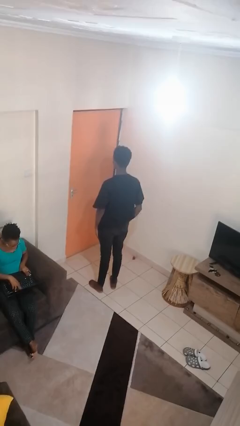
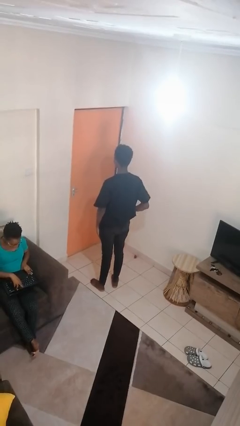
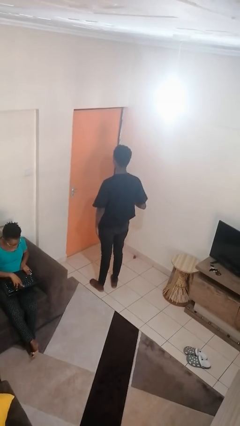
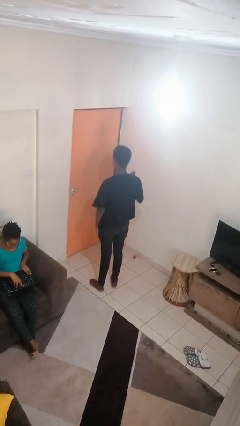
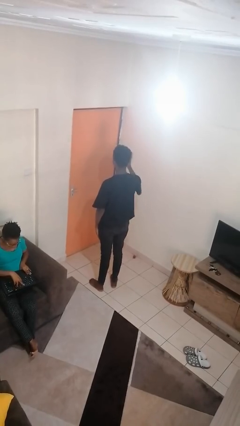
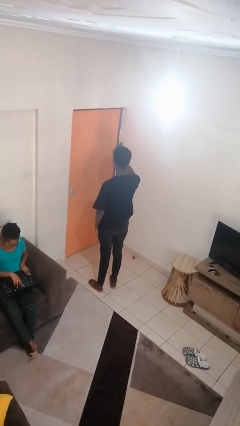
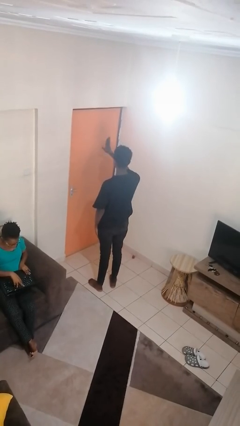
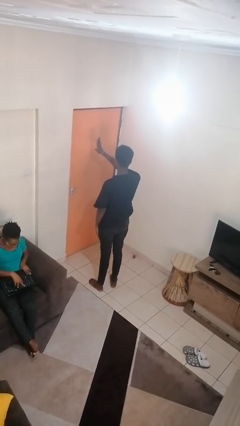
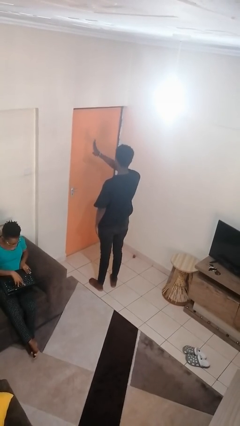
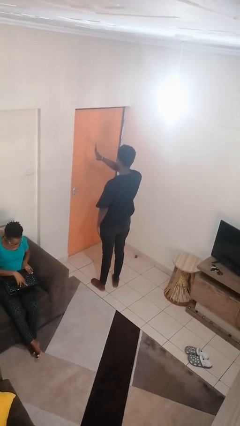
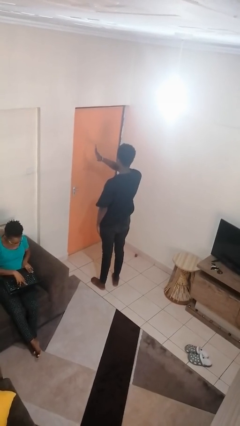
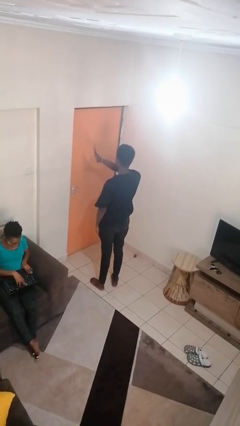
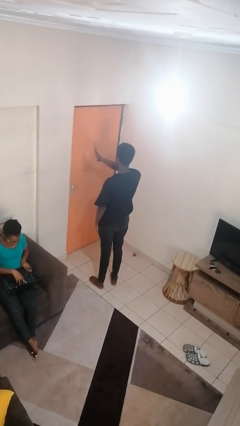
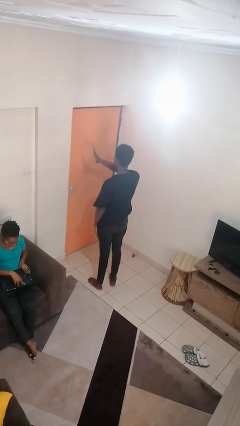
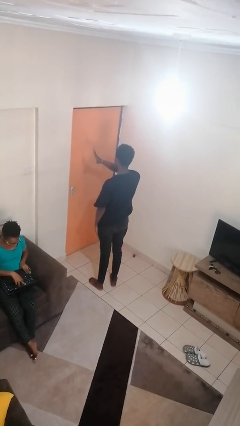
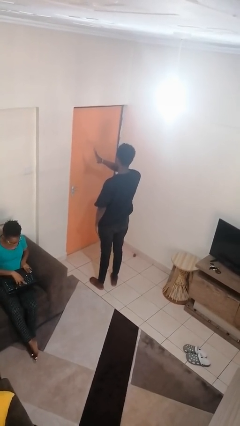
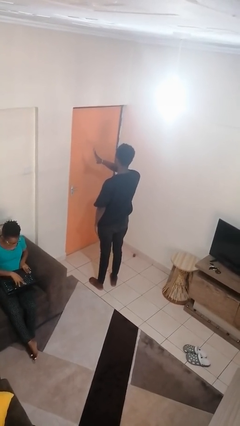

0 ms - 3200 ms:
person gestures swipe left

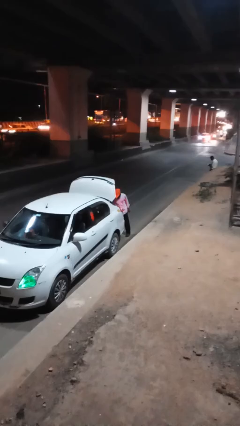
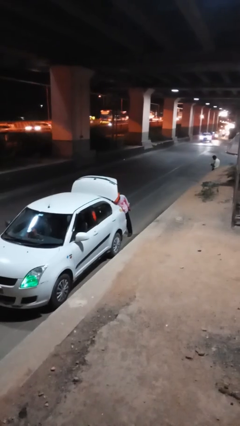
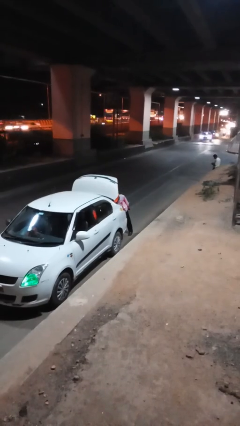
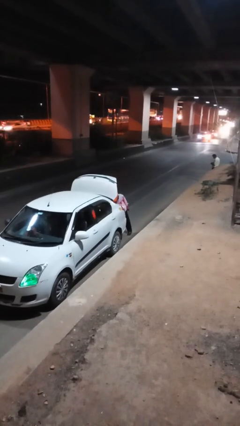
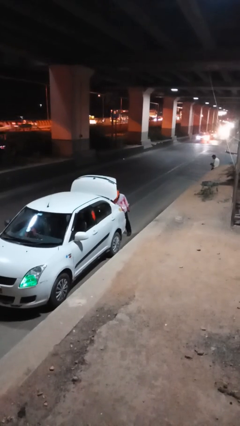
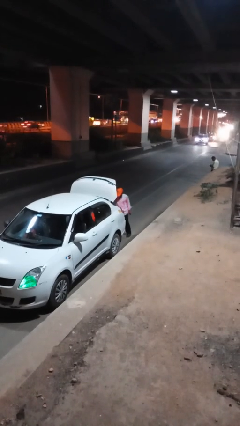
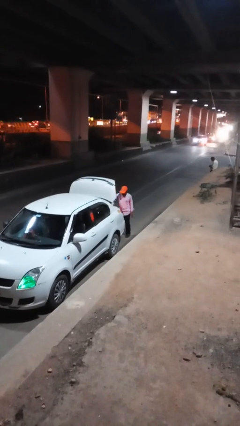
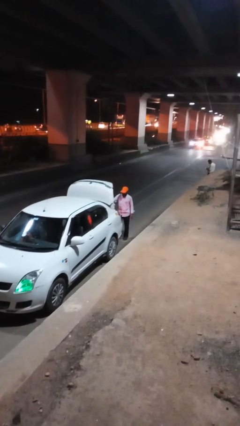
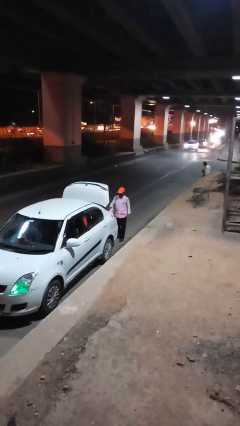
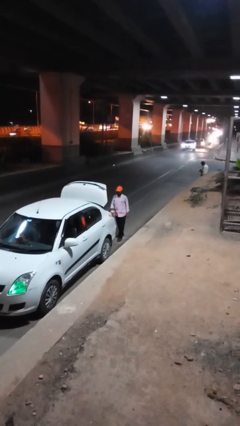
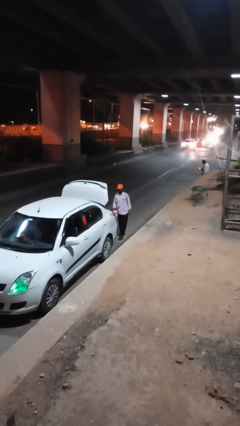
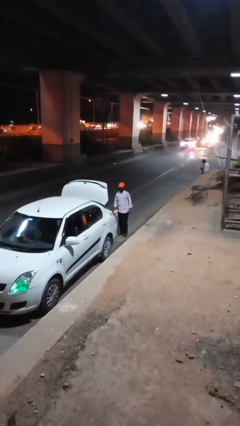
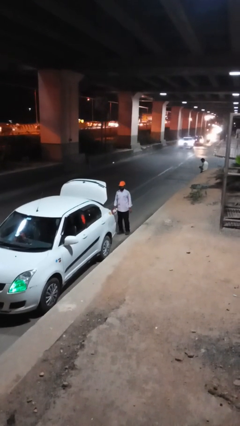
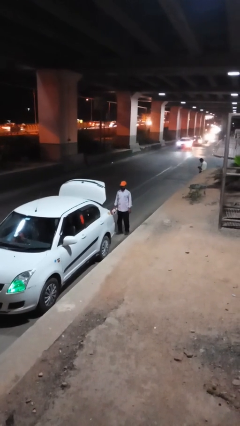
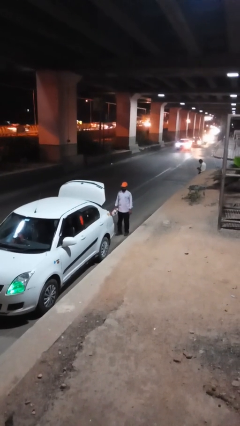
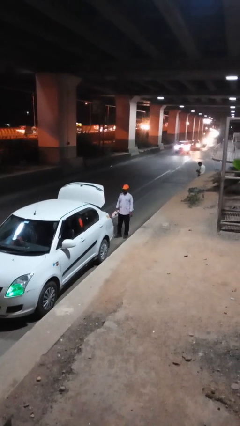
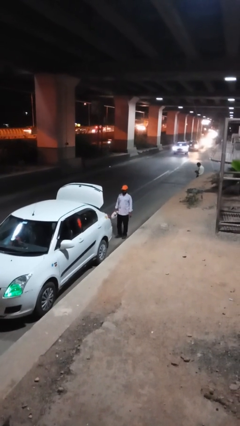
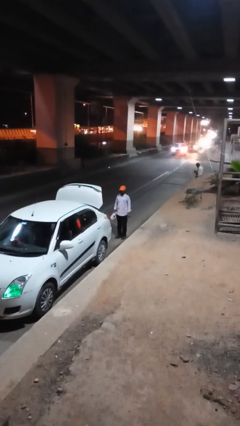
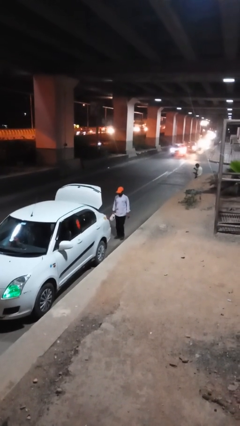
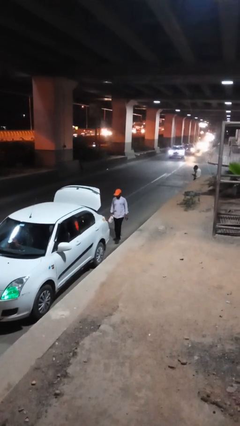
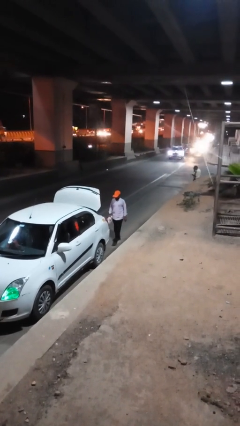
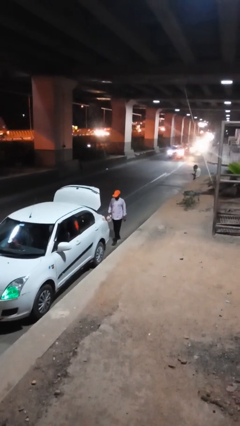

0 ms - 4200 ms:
person unloads car

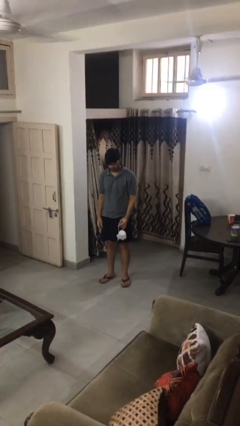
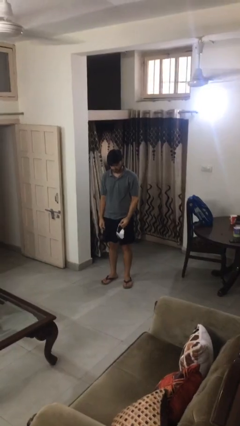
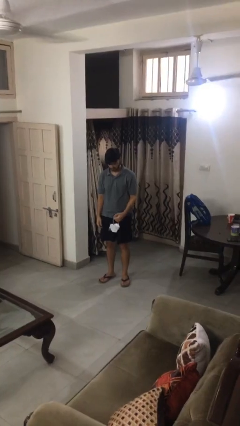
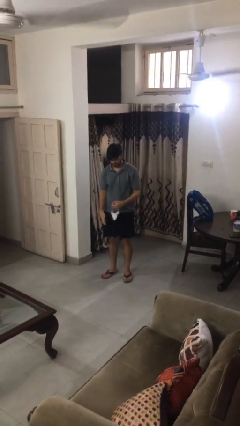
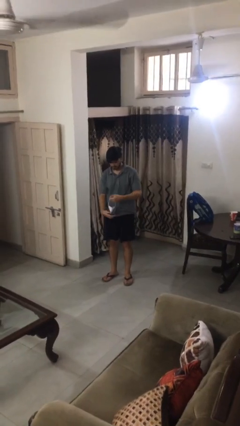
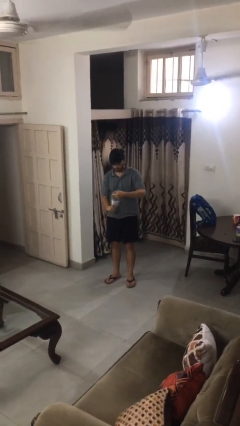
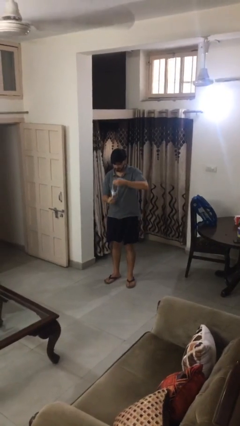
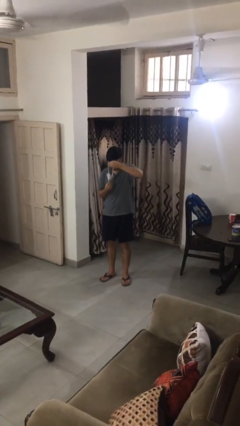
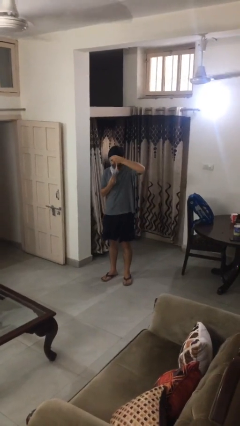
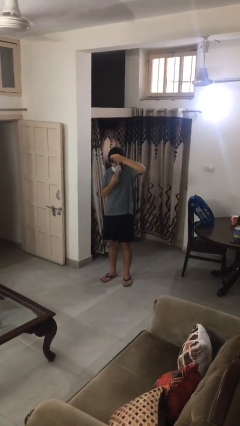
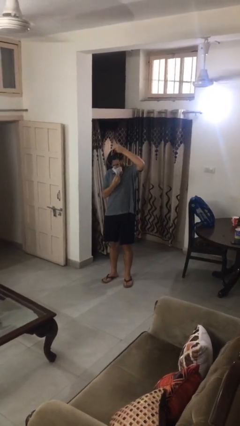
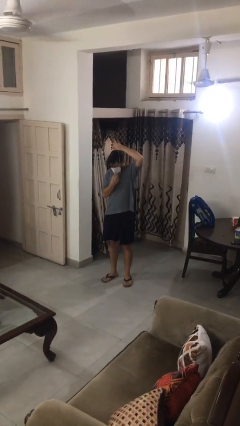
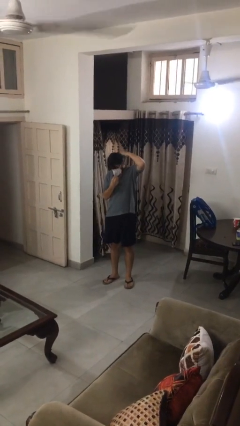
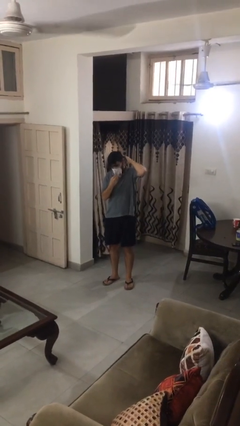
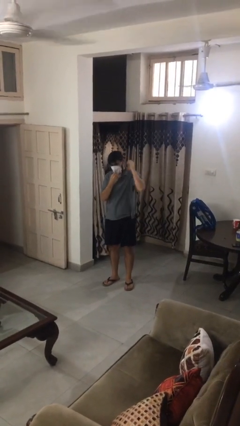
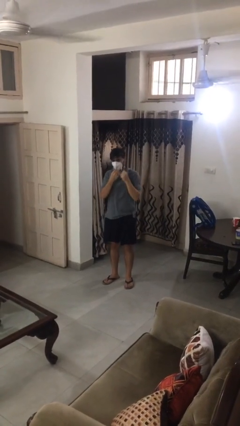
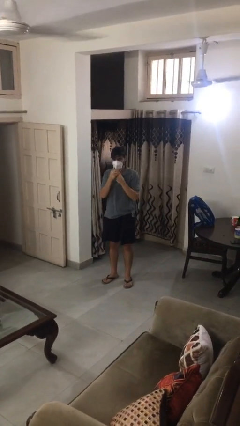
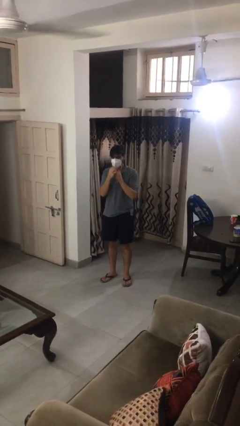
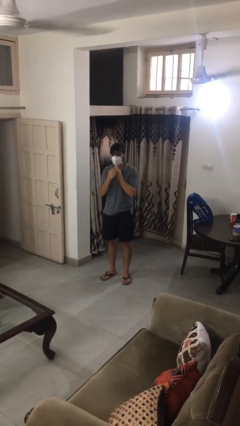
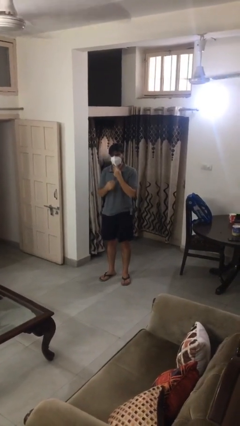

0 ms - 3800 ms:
person puts on facemask

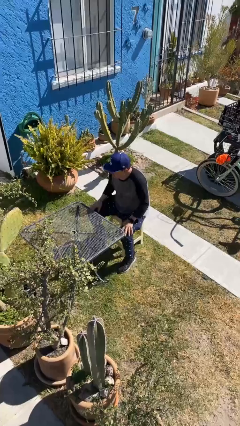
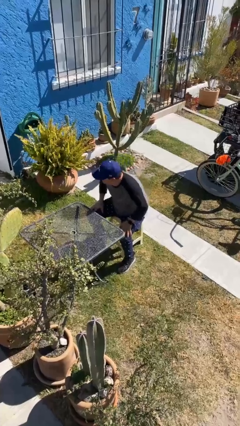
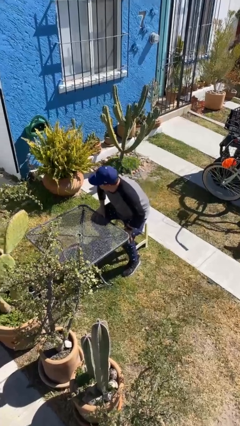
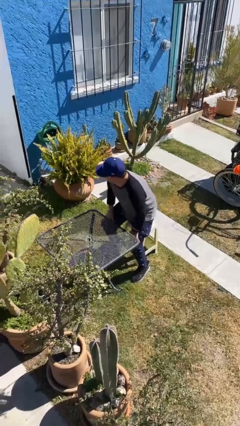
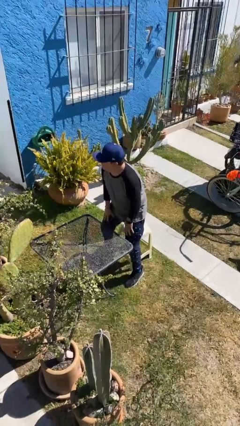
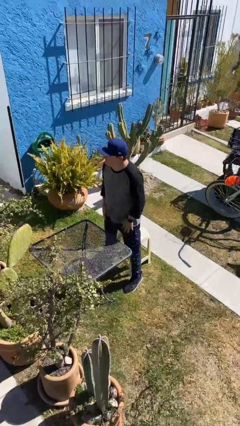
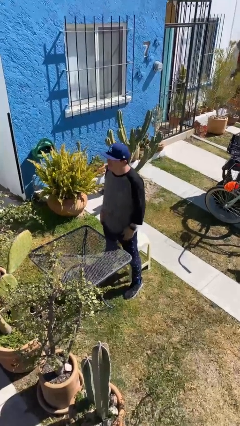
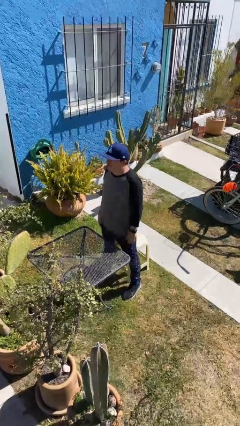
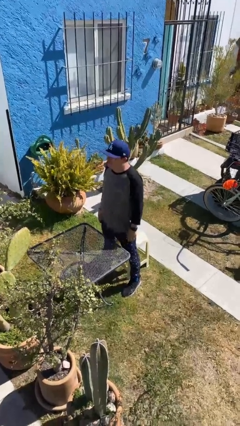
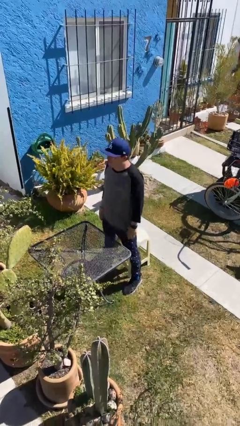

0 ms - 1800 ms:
person stands up

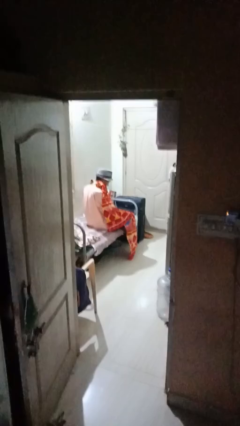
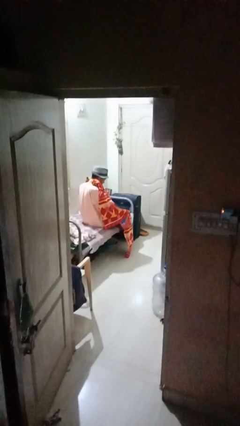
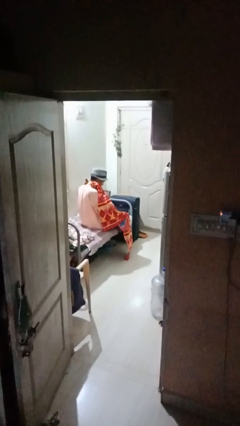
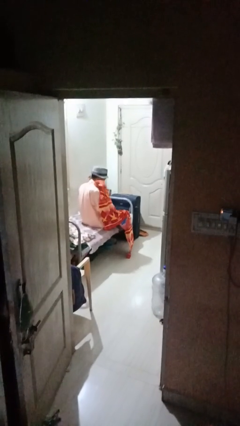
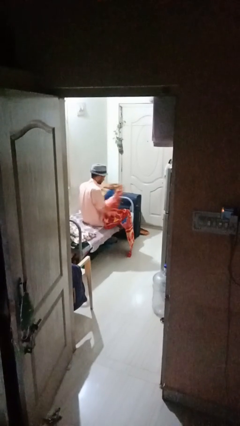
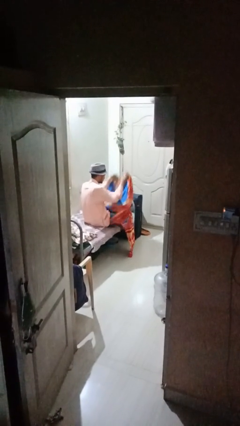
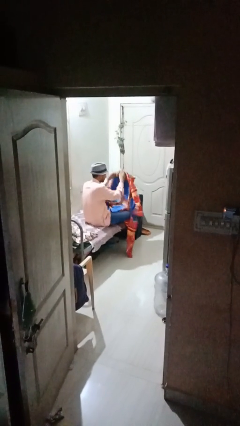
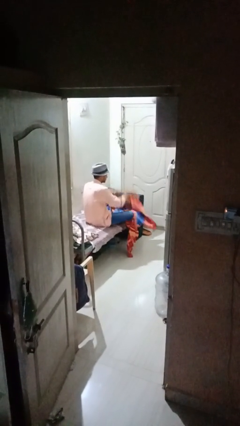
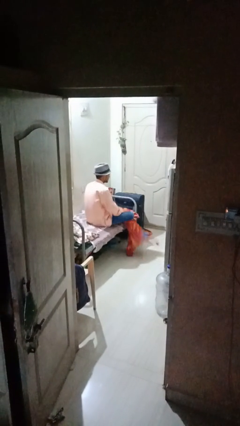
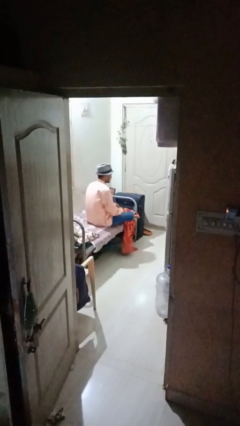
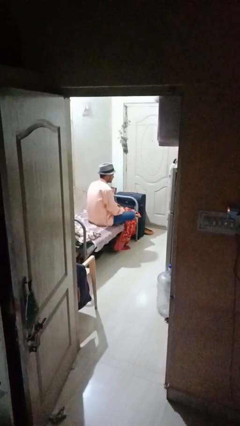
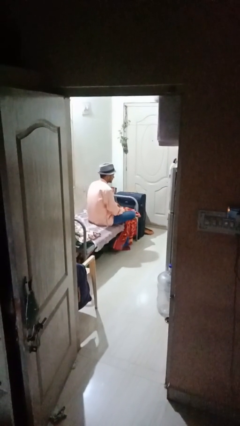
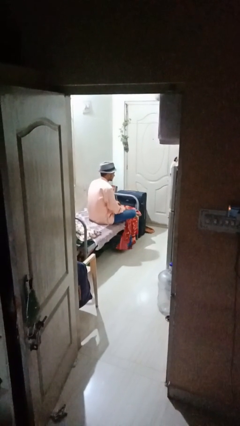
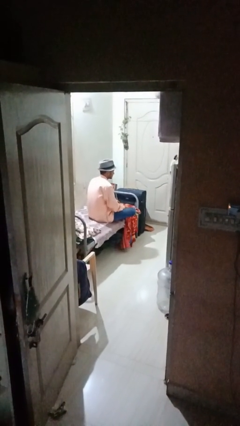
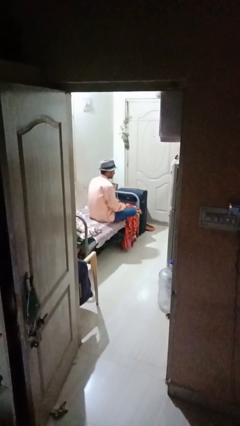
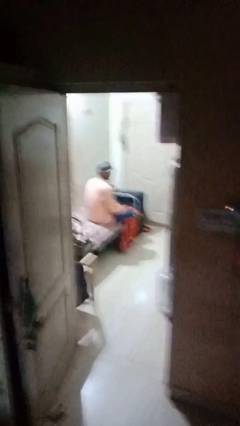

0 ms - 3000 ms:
person uncovers with blanket

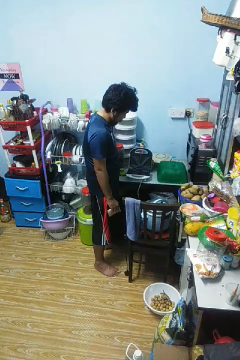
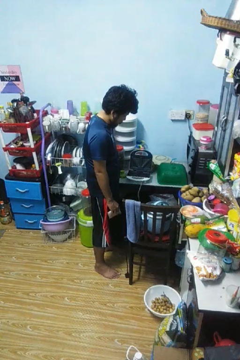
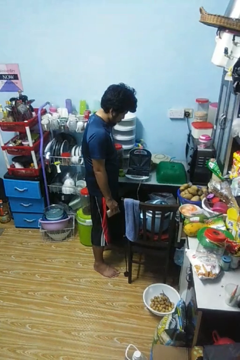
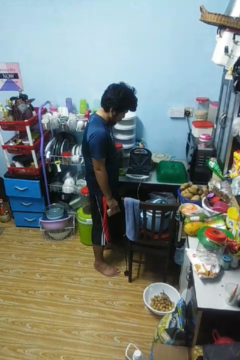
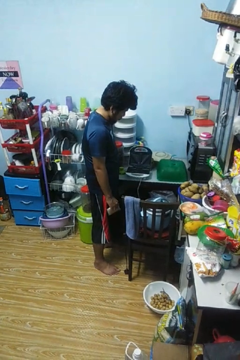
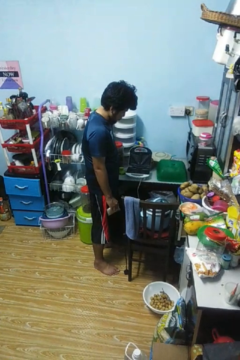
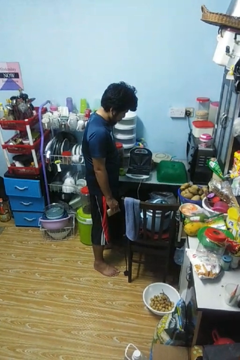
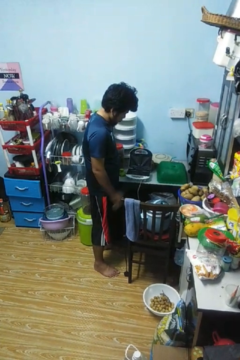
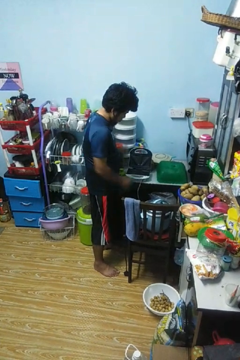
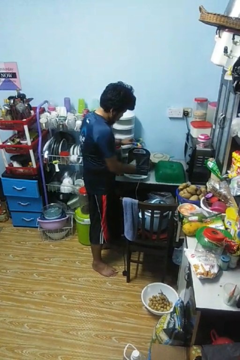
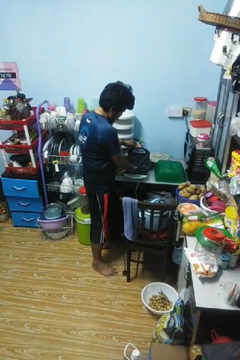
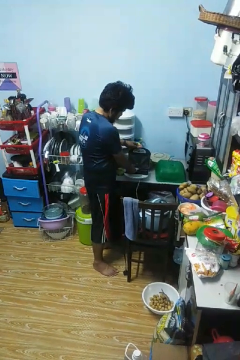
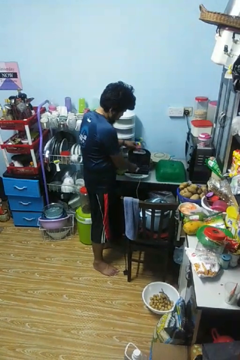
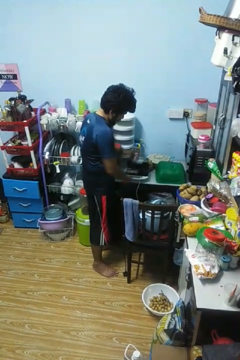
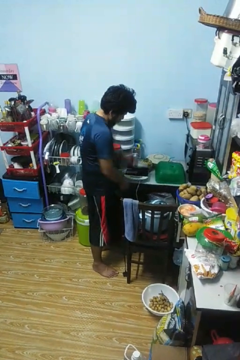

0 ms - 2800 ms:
person puts object into toaster
